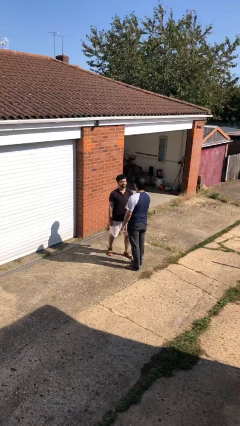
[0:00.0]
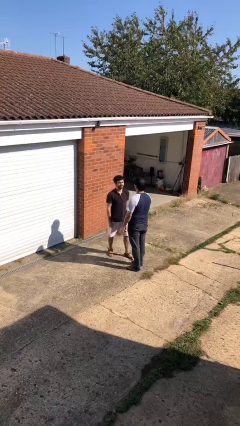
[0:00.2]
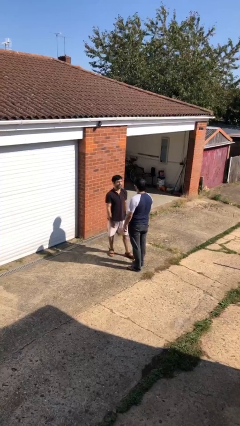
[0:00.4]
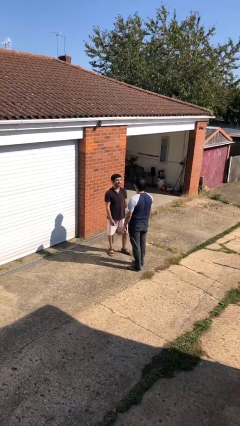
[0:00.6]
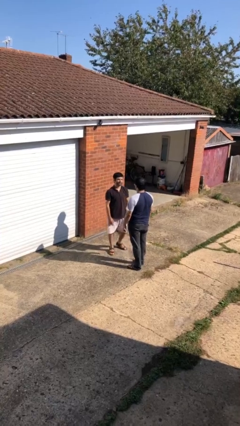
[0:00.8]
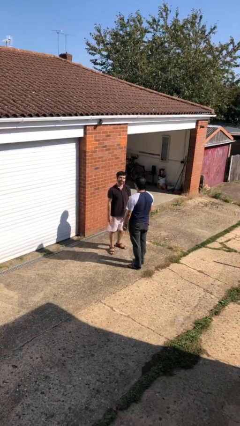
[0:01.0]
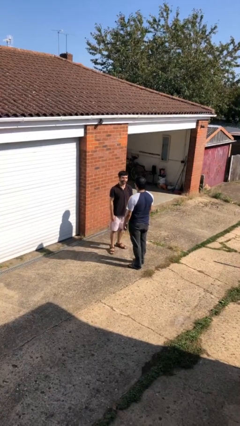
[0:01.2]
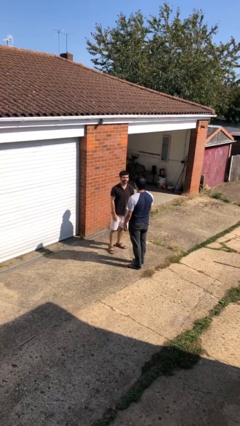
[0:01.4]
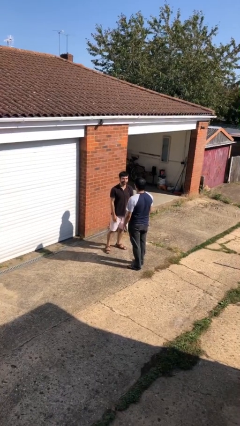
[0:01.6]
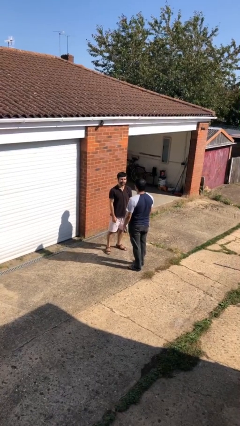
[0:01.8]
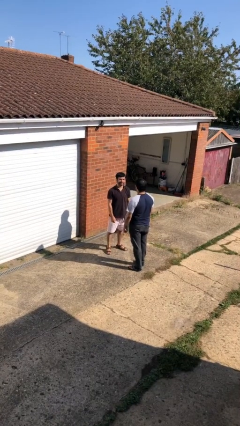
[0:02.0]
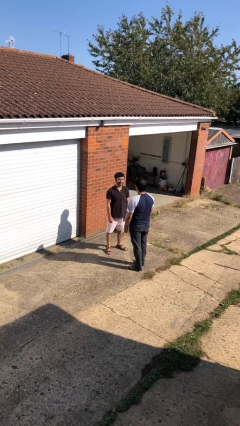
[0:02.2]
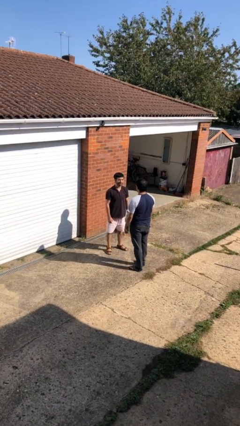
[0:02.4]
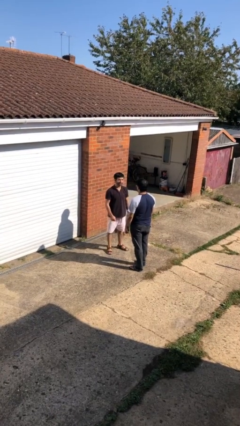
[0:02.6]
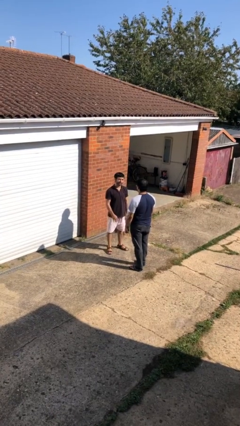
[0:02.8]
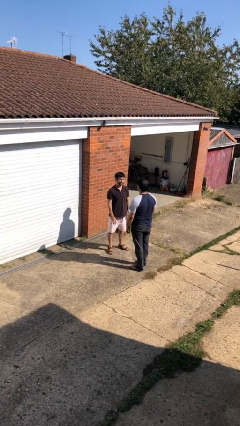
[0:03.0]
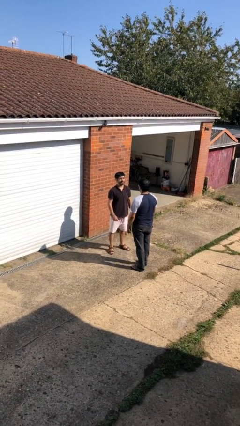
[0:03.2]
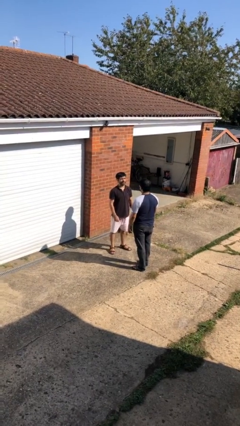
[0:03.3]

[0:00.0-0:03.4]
person talks to person

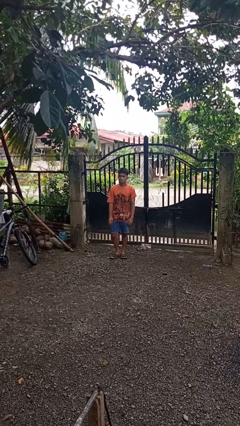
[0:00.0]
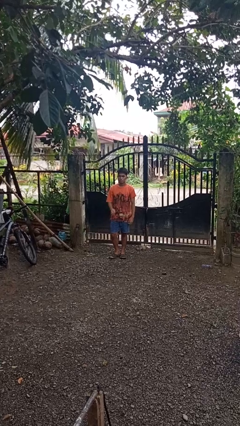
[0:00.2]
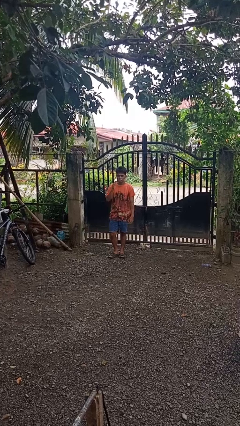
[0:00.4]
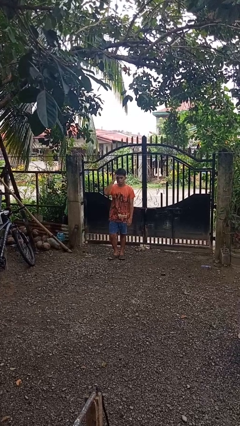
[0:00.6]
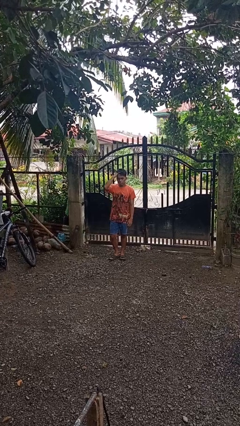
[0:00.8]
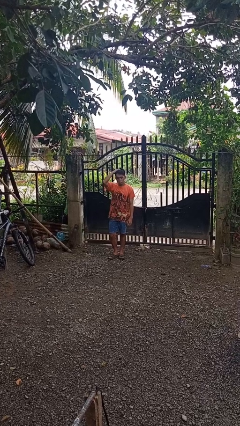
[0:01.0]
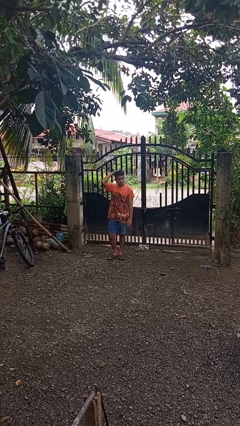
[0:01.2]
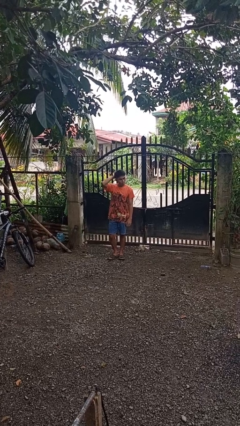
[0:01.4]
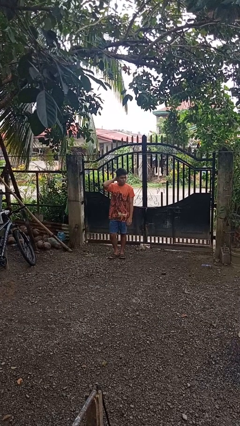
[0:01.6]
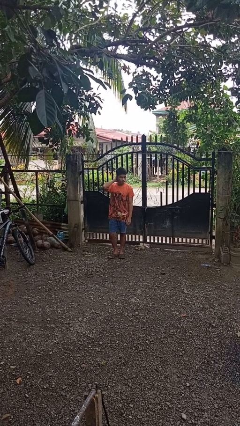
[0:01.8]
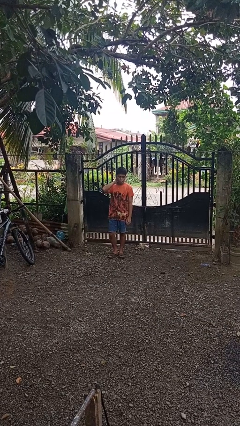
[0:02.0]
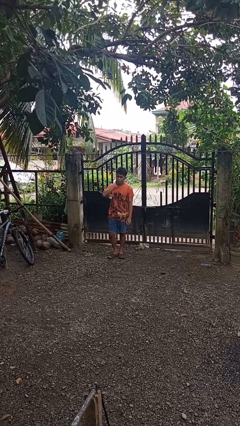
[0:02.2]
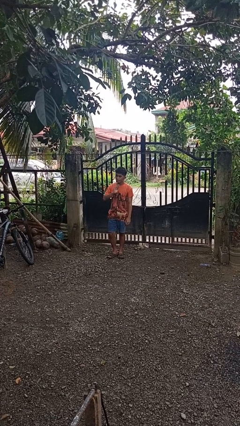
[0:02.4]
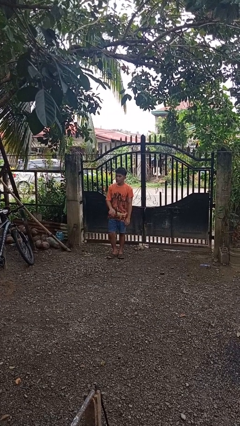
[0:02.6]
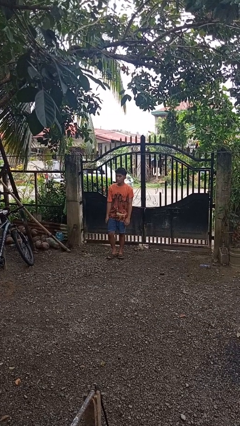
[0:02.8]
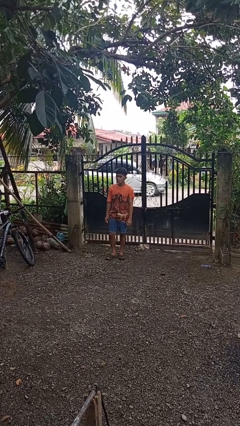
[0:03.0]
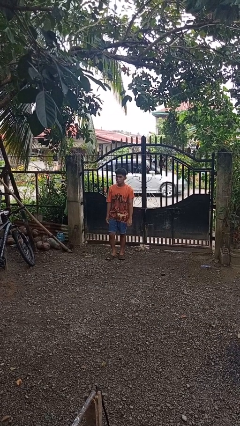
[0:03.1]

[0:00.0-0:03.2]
person strokes hair

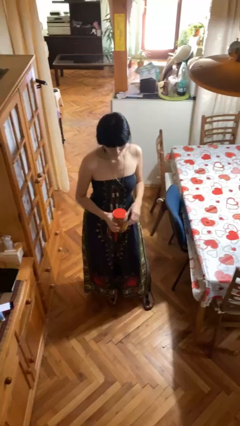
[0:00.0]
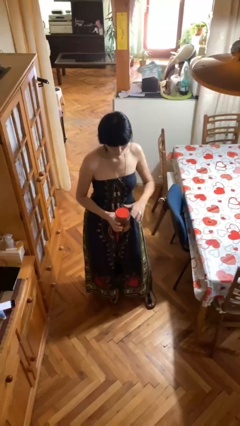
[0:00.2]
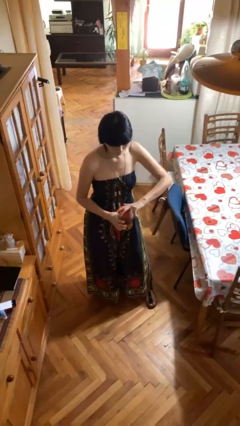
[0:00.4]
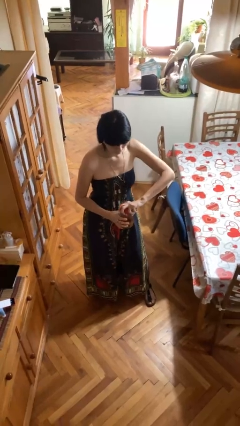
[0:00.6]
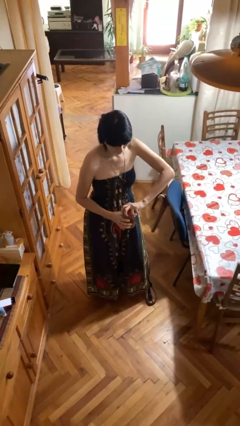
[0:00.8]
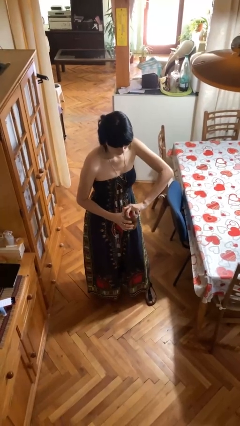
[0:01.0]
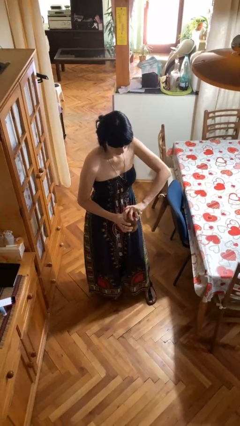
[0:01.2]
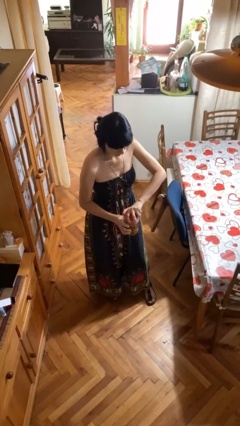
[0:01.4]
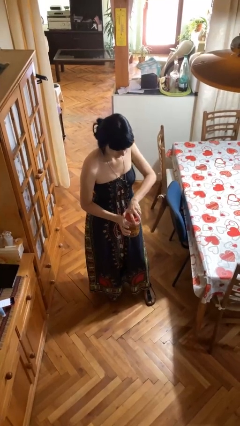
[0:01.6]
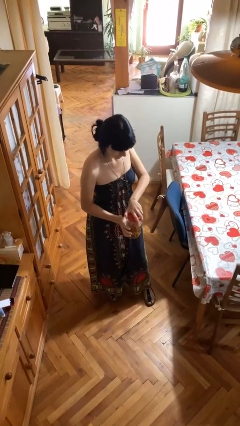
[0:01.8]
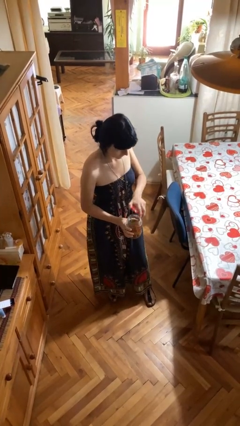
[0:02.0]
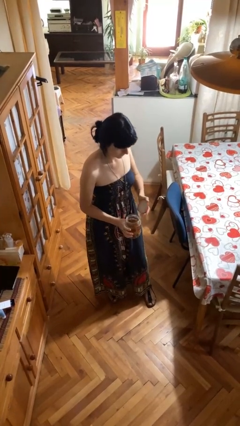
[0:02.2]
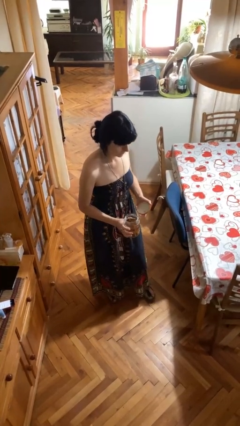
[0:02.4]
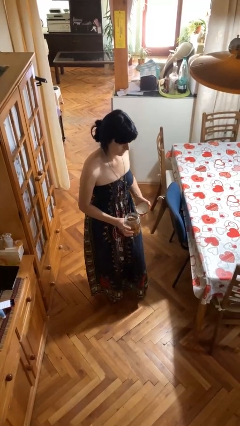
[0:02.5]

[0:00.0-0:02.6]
person opens jar

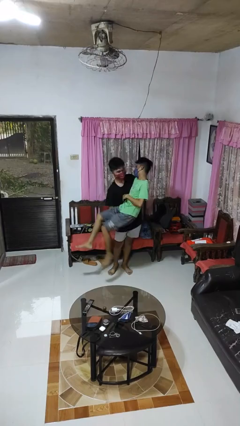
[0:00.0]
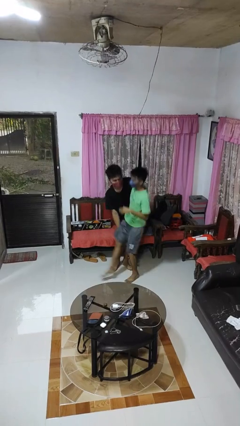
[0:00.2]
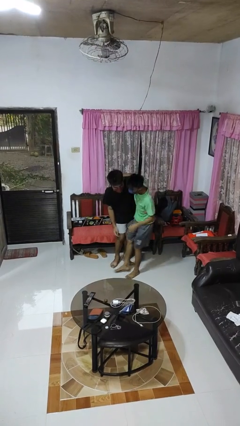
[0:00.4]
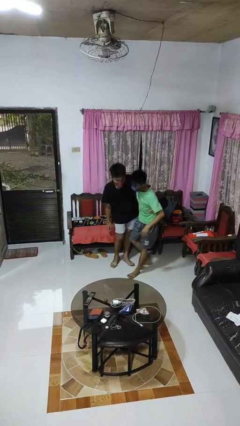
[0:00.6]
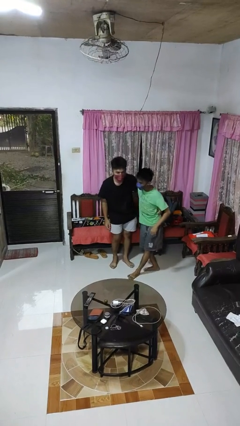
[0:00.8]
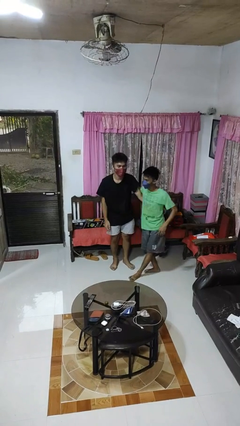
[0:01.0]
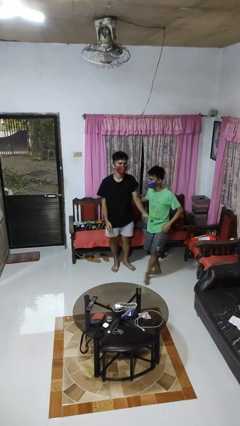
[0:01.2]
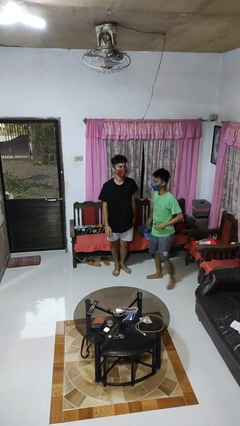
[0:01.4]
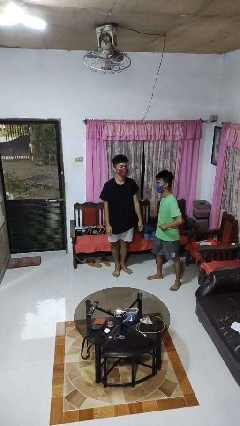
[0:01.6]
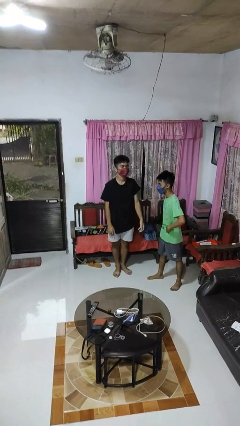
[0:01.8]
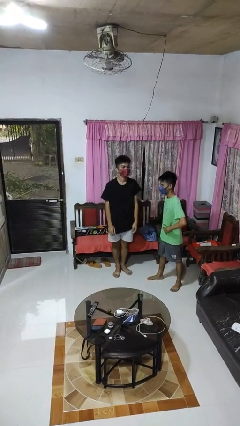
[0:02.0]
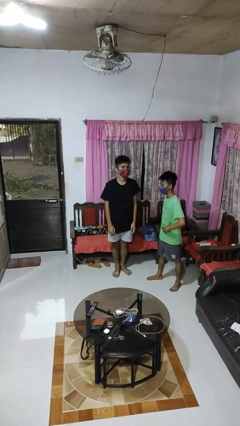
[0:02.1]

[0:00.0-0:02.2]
person puts down person

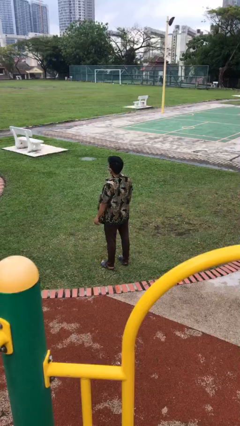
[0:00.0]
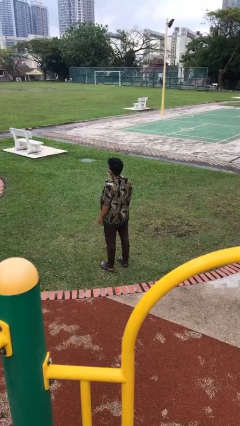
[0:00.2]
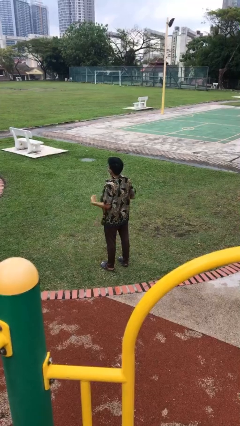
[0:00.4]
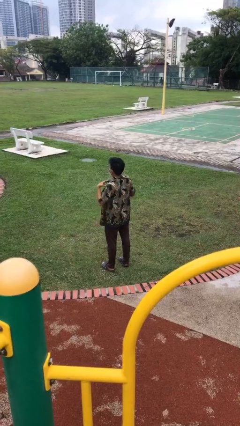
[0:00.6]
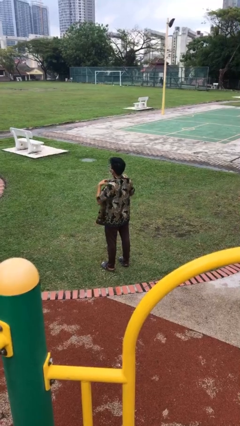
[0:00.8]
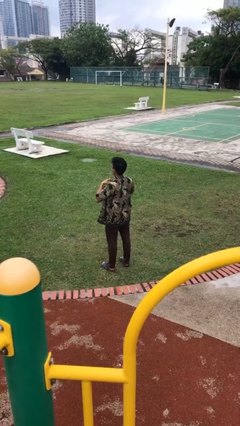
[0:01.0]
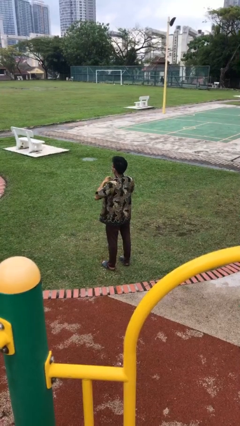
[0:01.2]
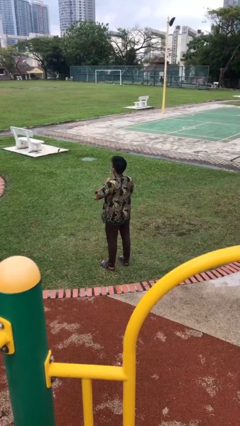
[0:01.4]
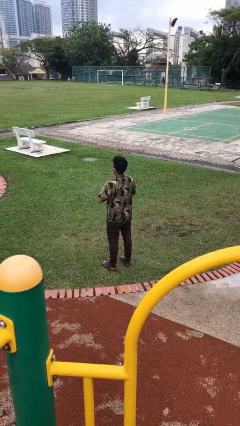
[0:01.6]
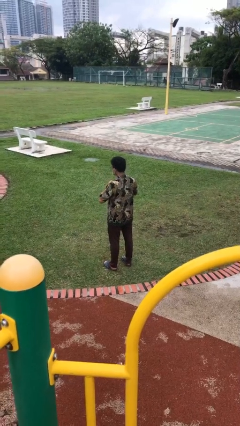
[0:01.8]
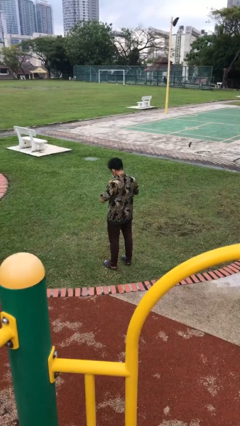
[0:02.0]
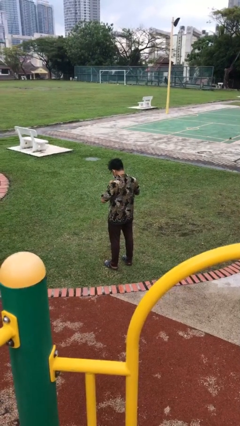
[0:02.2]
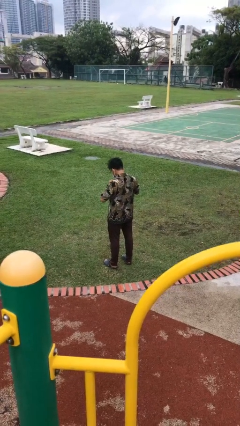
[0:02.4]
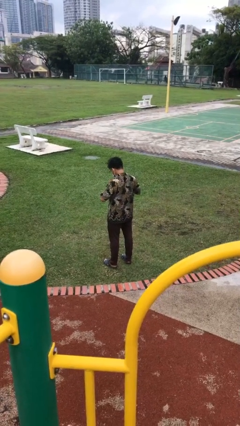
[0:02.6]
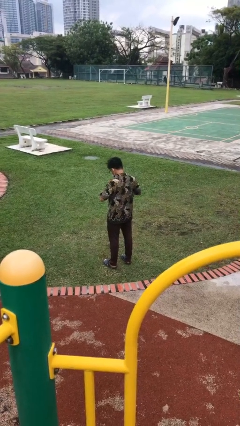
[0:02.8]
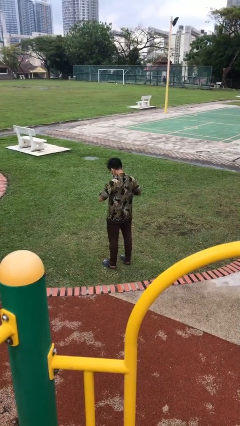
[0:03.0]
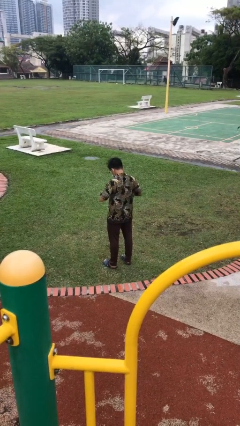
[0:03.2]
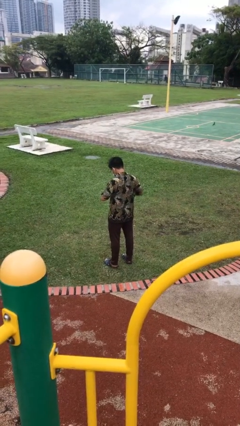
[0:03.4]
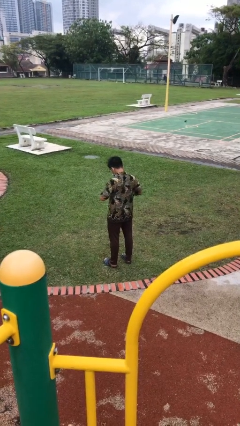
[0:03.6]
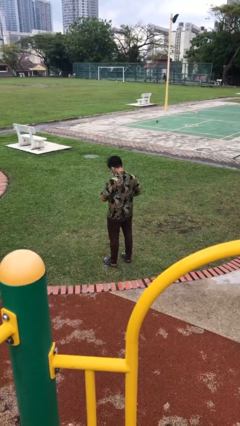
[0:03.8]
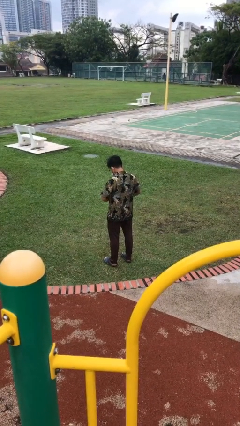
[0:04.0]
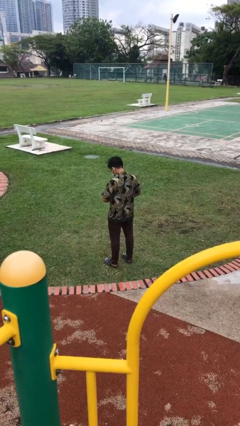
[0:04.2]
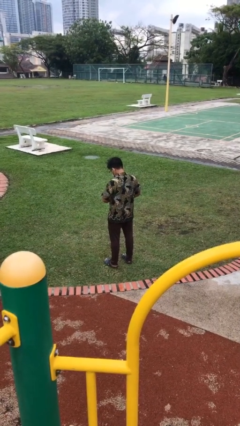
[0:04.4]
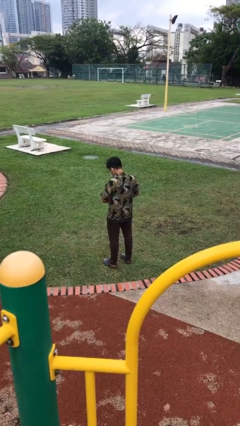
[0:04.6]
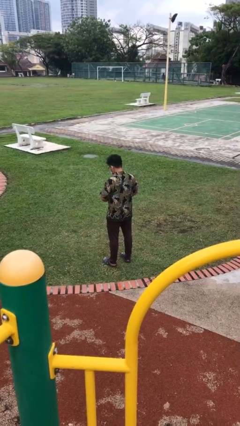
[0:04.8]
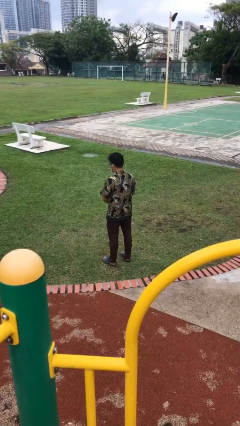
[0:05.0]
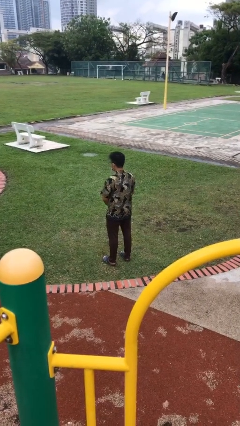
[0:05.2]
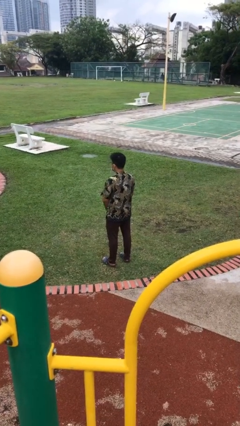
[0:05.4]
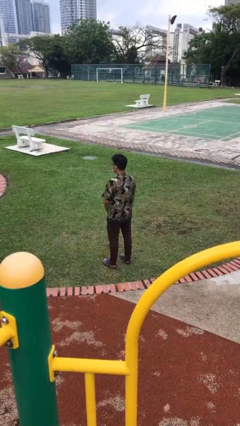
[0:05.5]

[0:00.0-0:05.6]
person buttons shirt

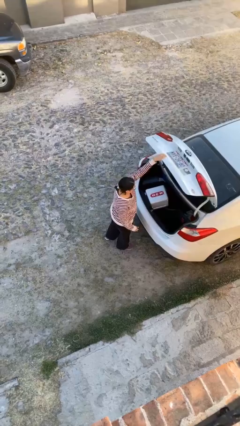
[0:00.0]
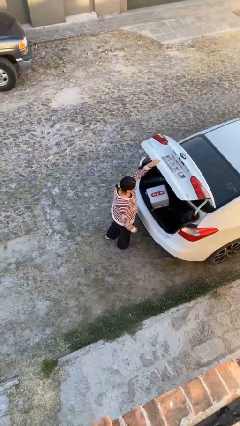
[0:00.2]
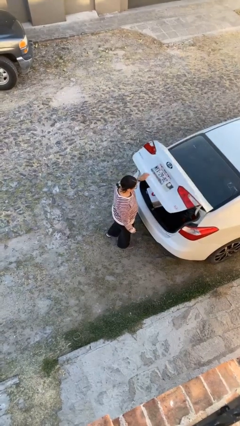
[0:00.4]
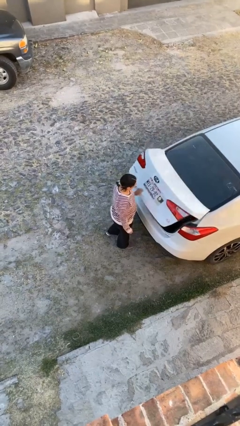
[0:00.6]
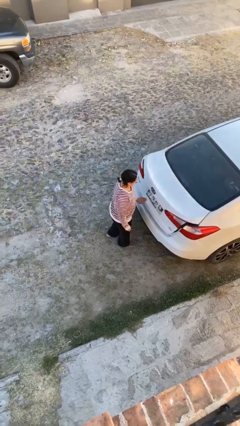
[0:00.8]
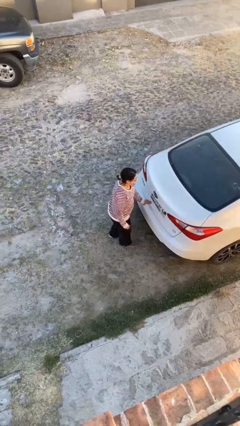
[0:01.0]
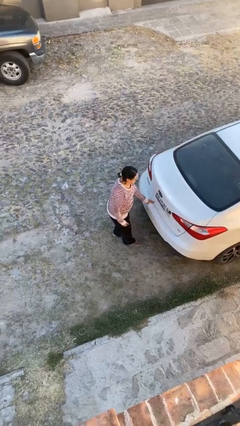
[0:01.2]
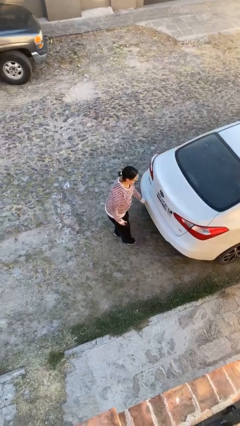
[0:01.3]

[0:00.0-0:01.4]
person closes car trunk
